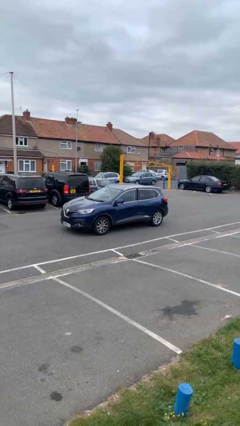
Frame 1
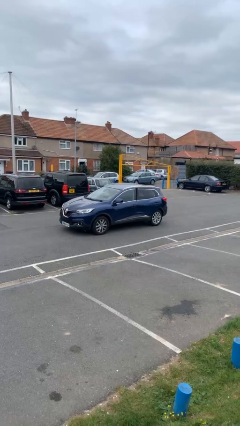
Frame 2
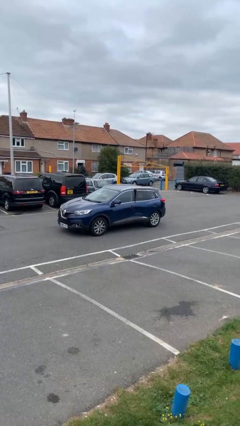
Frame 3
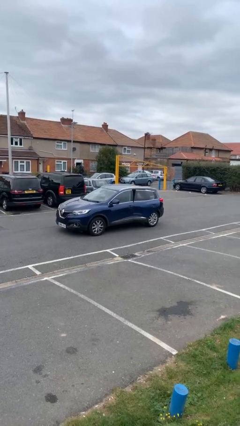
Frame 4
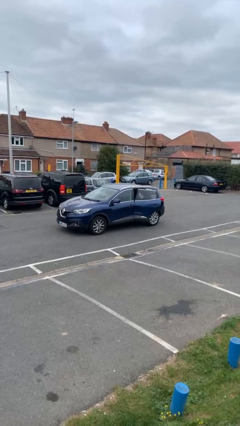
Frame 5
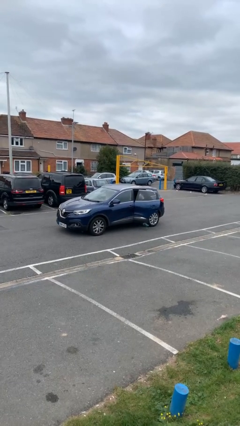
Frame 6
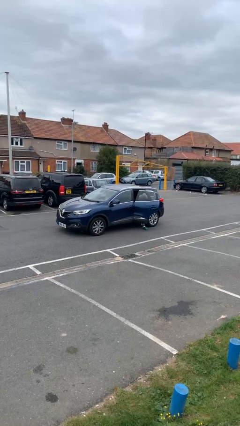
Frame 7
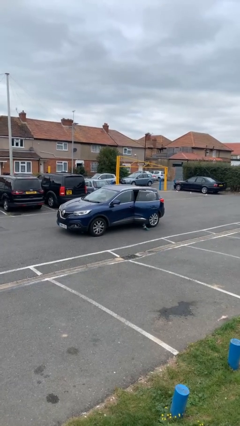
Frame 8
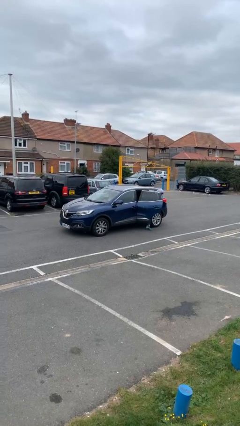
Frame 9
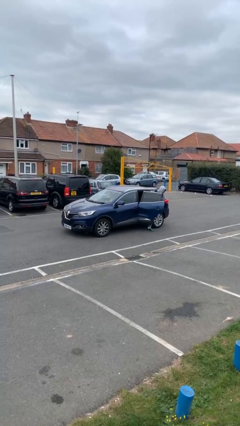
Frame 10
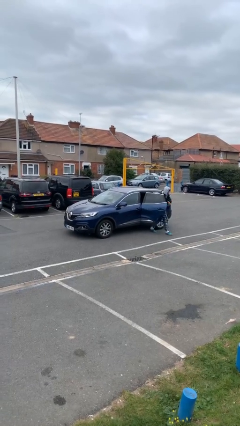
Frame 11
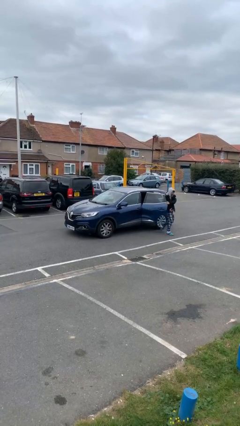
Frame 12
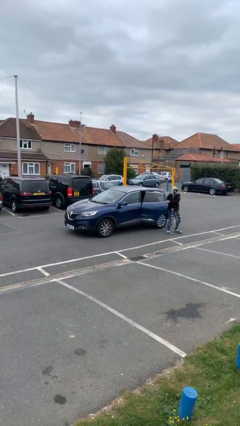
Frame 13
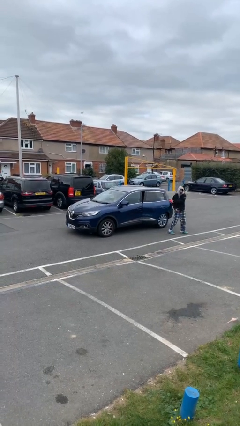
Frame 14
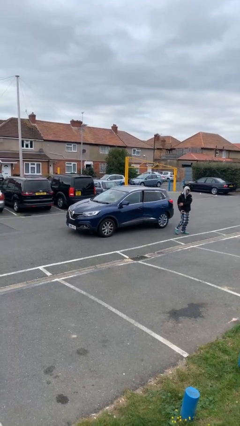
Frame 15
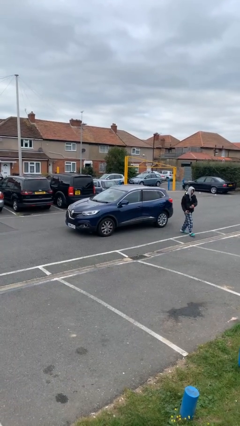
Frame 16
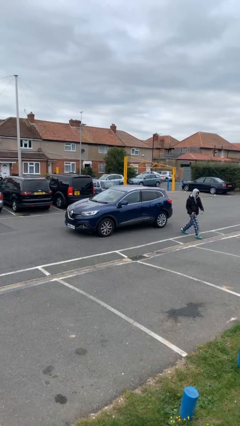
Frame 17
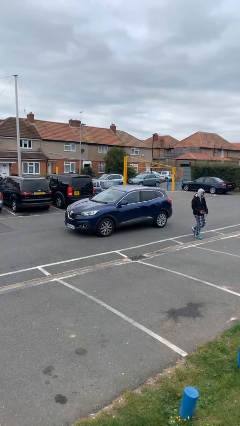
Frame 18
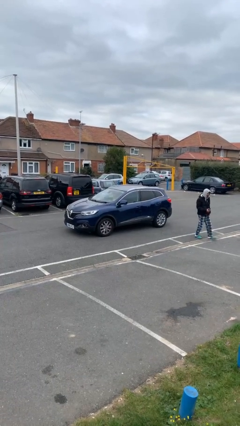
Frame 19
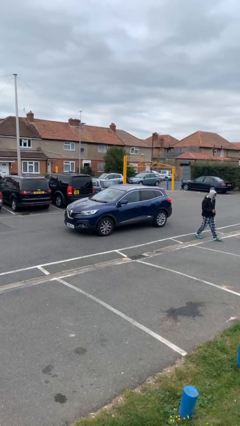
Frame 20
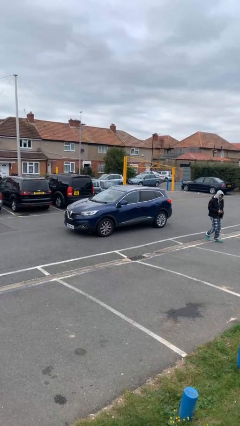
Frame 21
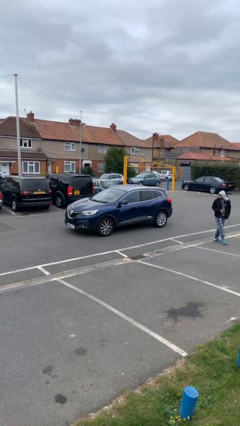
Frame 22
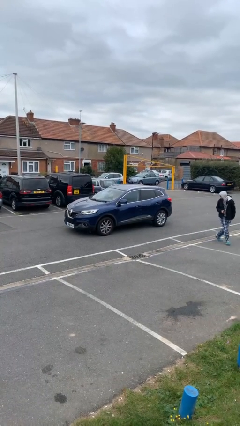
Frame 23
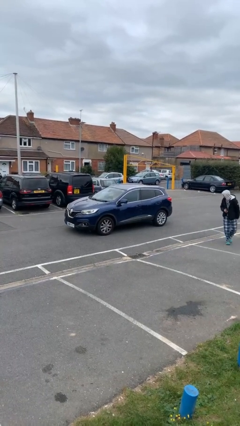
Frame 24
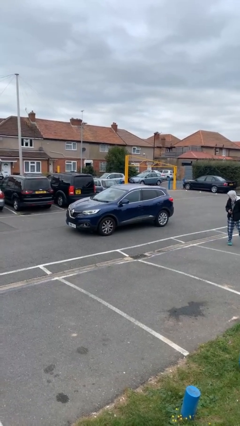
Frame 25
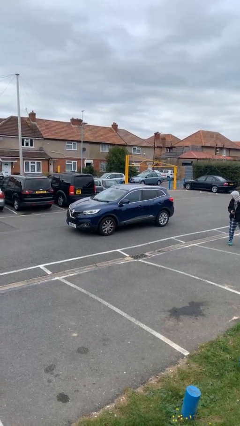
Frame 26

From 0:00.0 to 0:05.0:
car drops off person

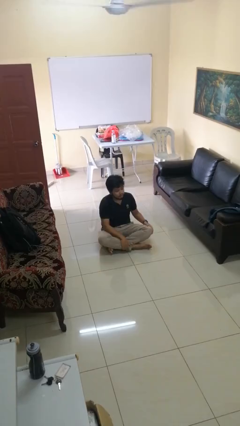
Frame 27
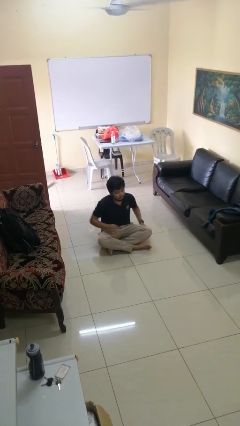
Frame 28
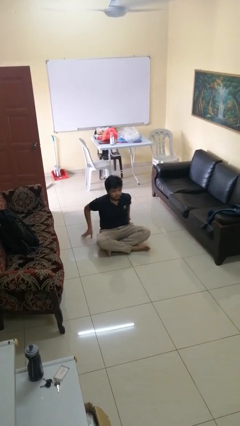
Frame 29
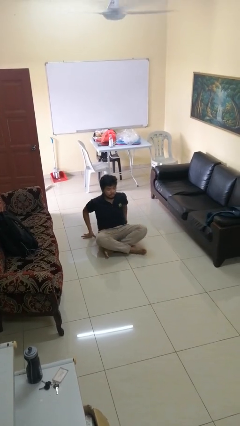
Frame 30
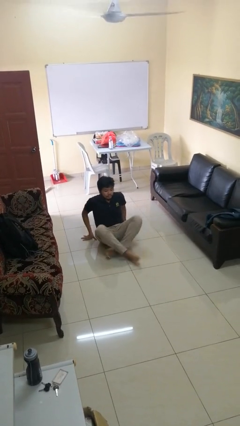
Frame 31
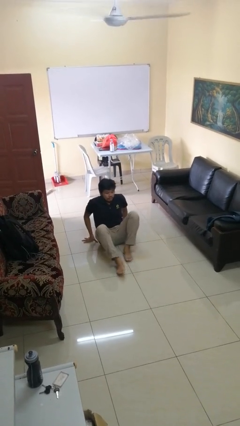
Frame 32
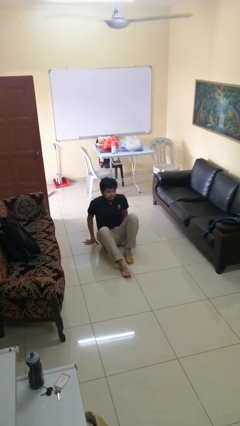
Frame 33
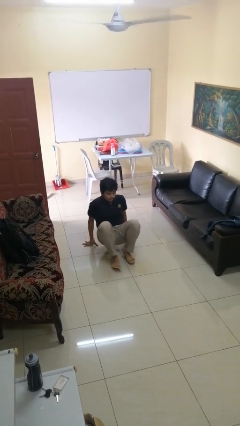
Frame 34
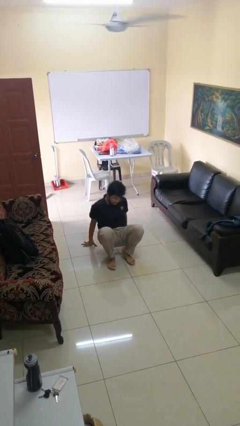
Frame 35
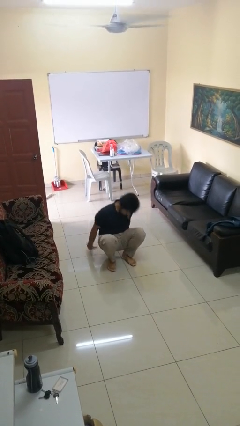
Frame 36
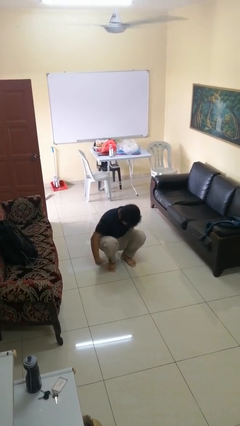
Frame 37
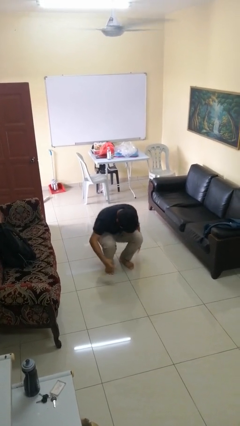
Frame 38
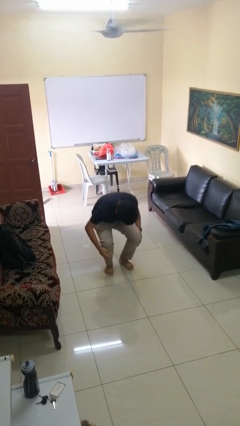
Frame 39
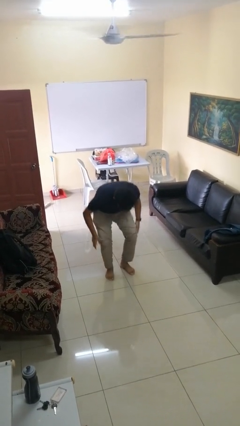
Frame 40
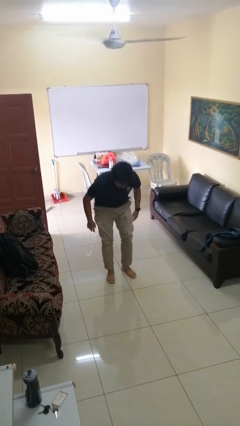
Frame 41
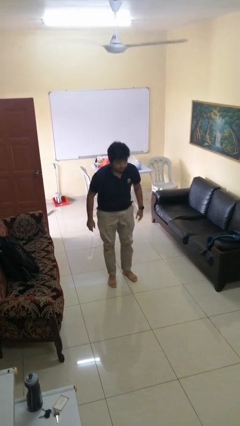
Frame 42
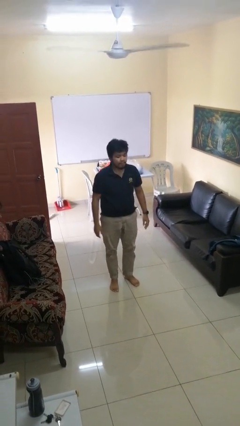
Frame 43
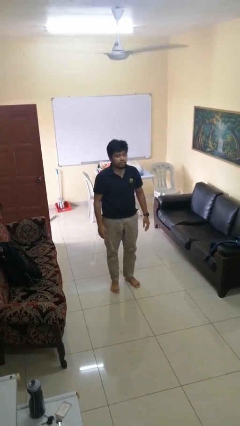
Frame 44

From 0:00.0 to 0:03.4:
person stands up from floor

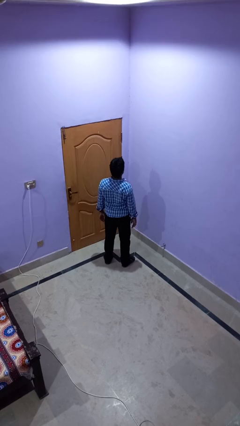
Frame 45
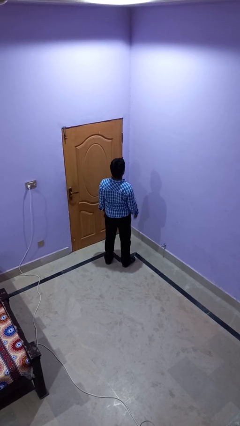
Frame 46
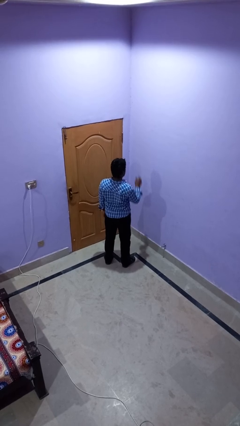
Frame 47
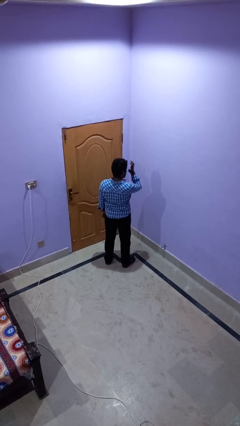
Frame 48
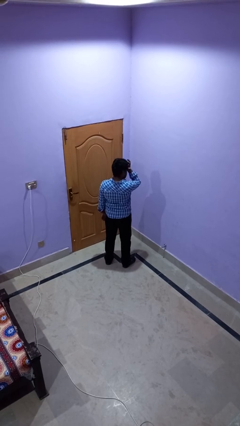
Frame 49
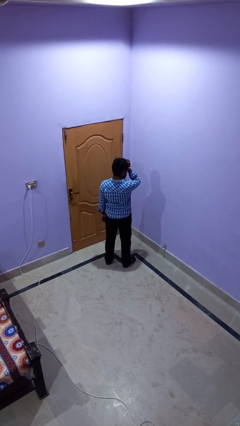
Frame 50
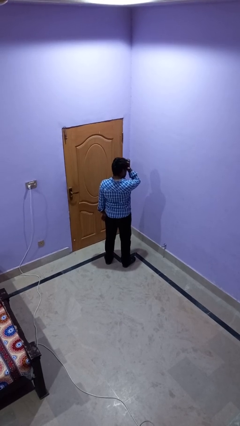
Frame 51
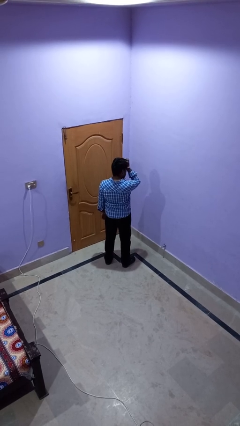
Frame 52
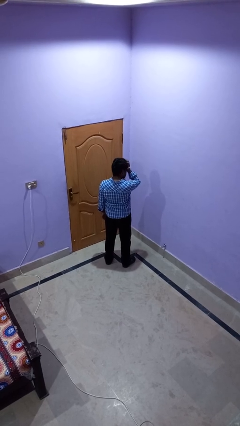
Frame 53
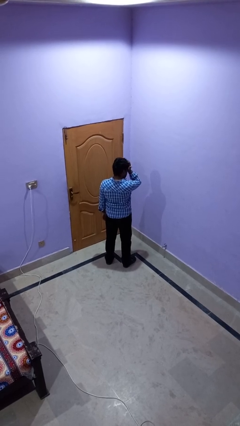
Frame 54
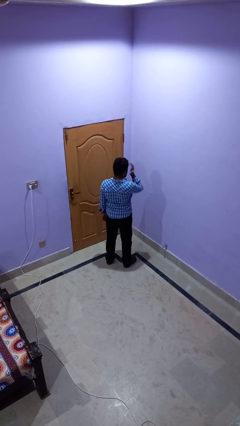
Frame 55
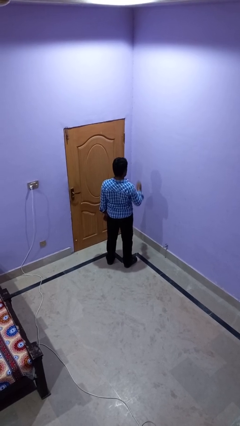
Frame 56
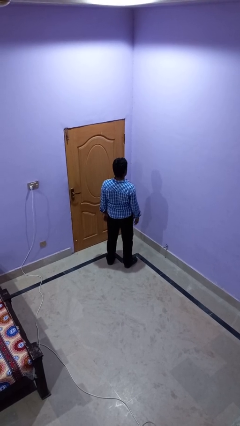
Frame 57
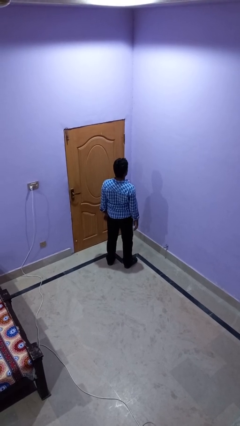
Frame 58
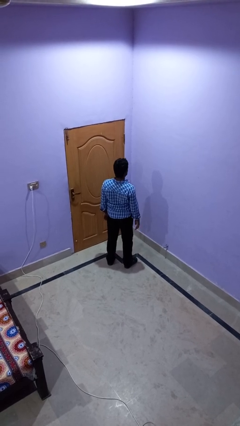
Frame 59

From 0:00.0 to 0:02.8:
person rubs eyes

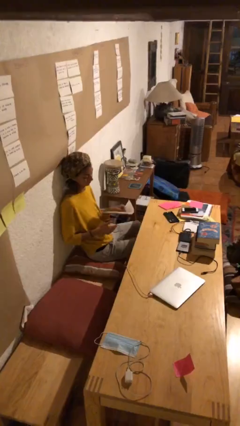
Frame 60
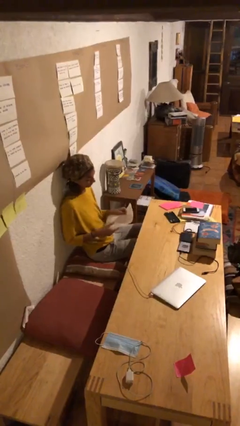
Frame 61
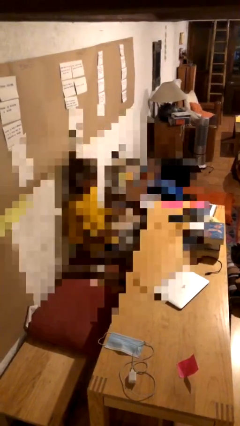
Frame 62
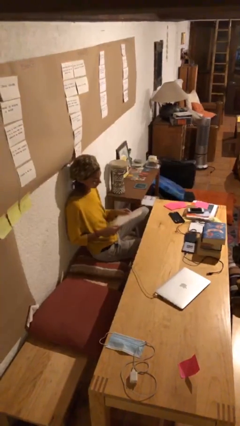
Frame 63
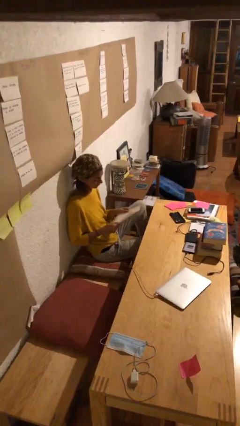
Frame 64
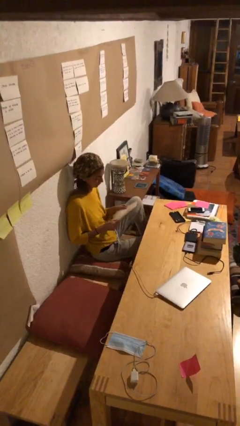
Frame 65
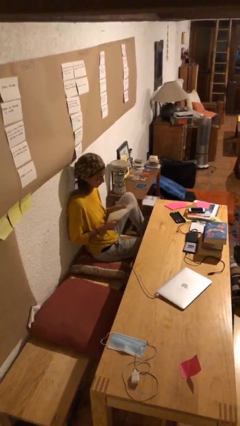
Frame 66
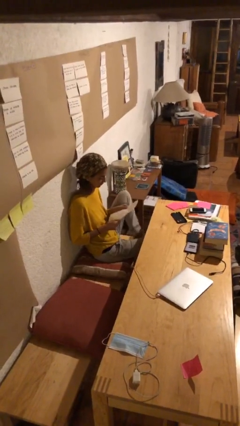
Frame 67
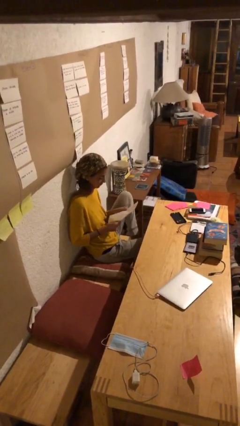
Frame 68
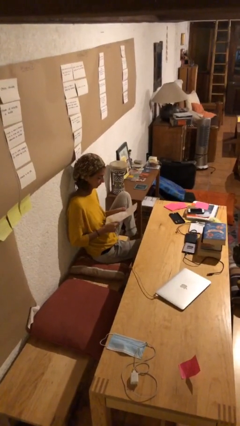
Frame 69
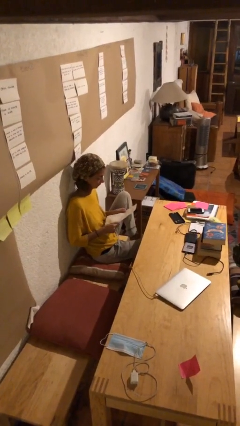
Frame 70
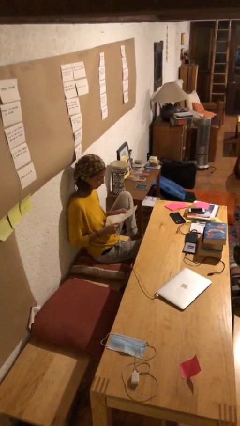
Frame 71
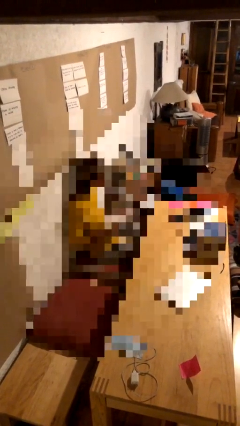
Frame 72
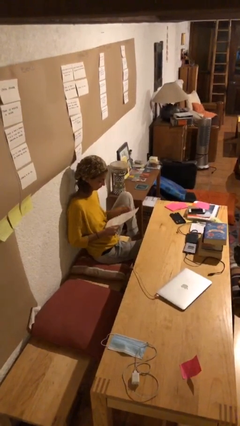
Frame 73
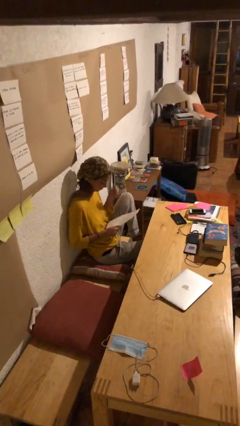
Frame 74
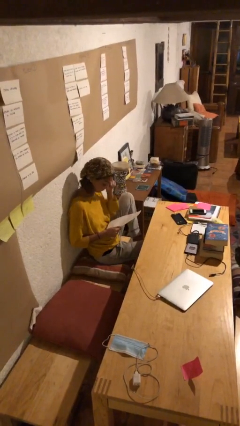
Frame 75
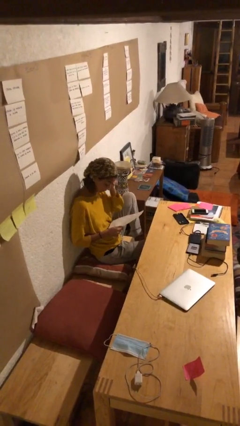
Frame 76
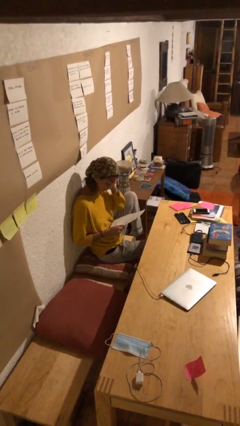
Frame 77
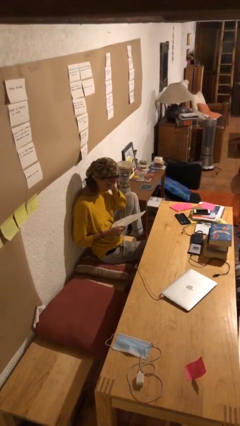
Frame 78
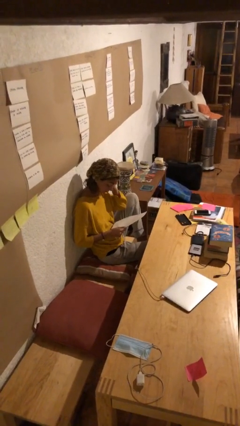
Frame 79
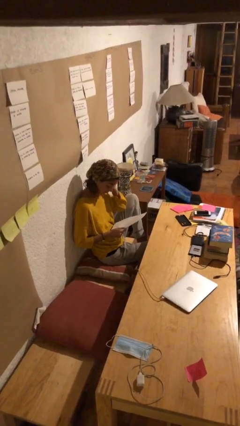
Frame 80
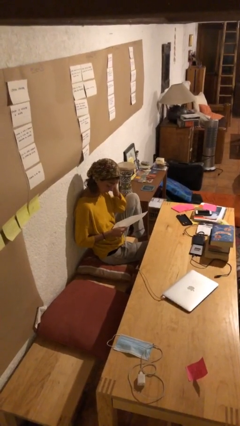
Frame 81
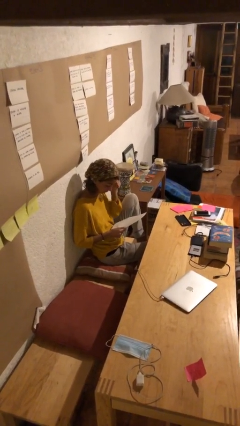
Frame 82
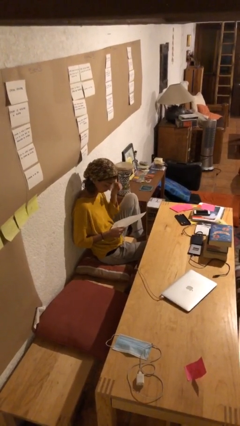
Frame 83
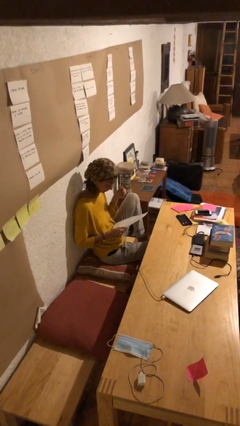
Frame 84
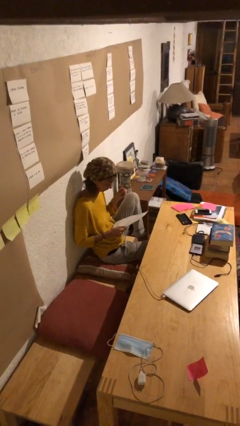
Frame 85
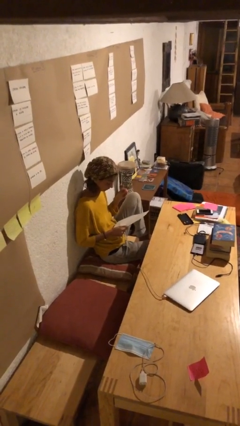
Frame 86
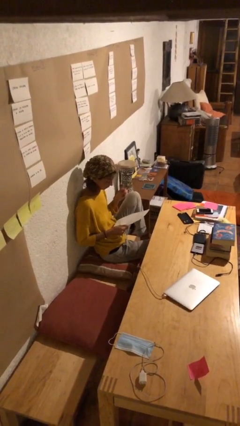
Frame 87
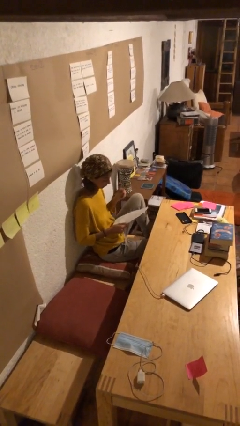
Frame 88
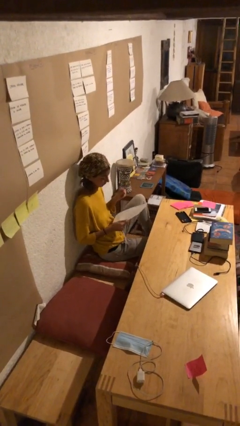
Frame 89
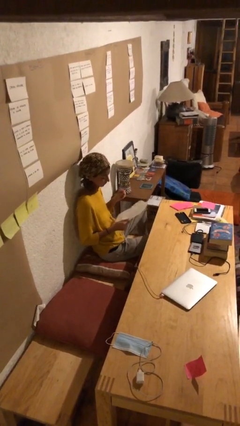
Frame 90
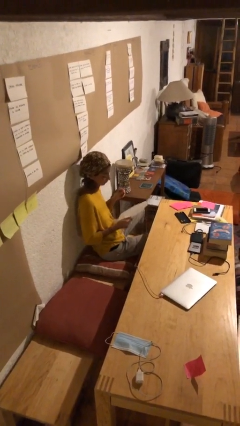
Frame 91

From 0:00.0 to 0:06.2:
person reads document

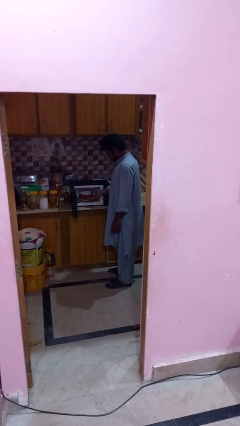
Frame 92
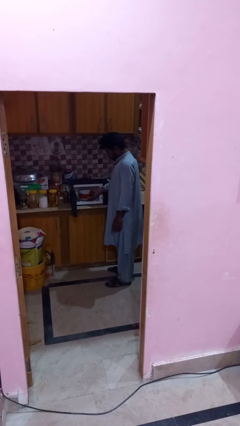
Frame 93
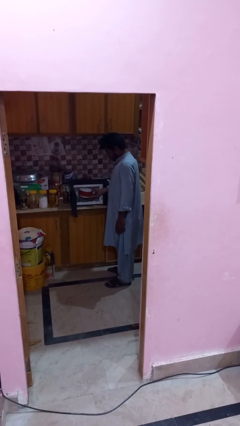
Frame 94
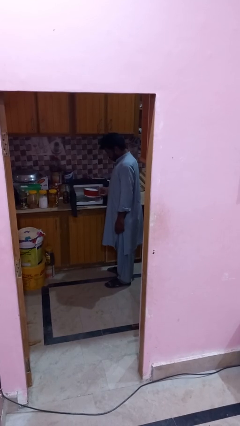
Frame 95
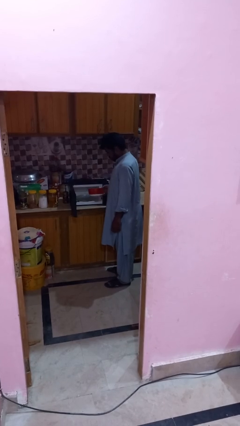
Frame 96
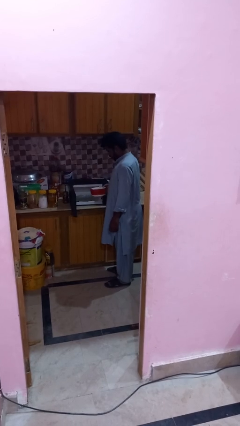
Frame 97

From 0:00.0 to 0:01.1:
person takes object from microwave
